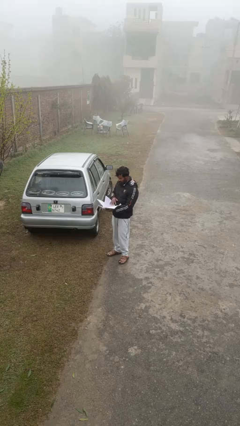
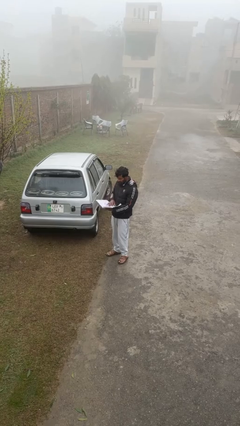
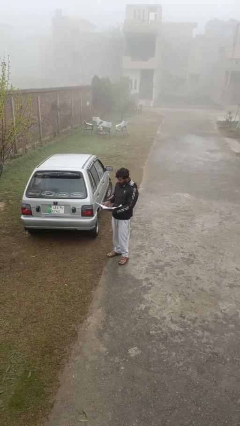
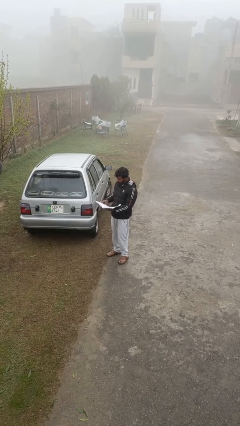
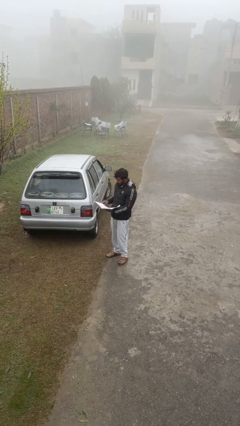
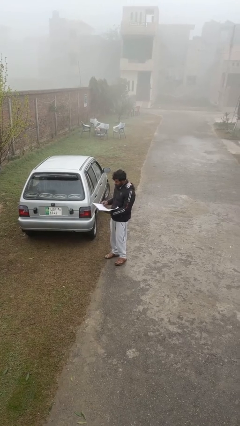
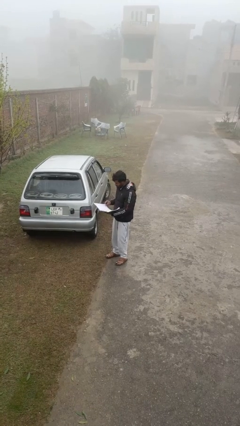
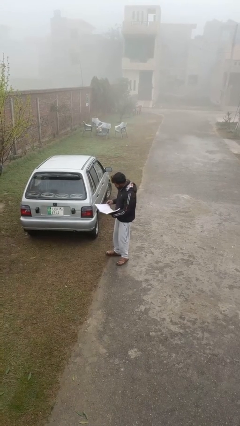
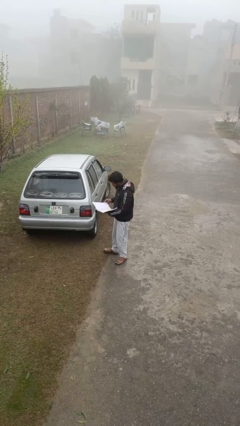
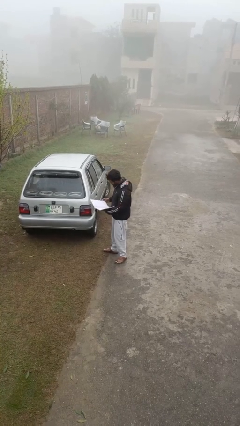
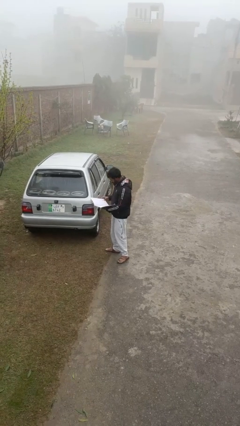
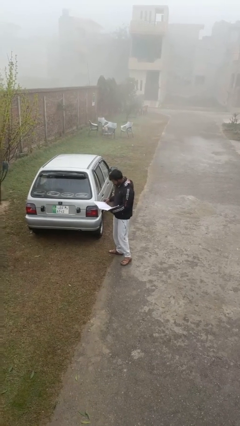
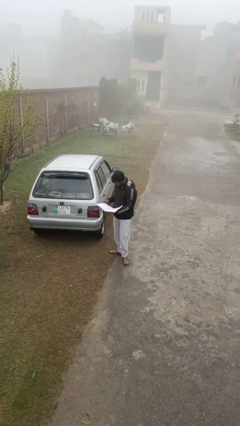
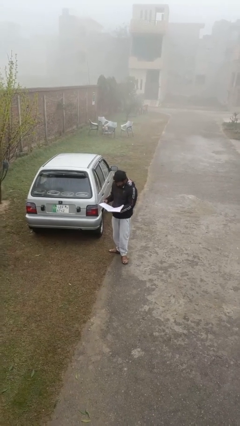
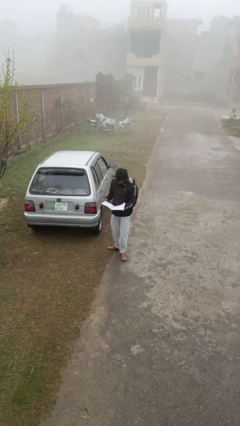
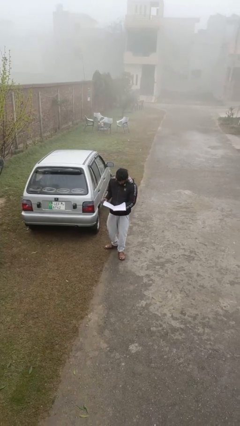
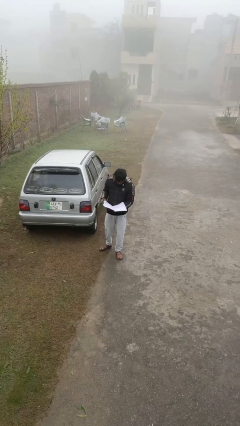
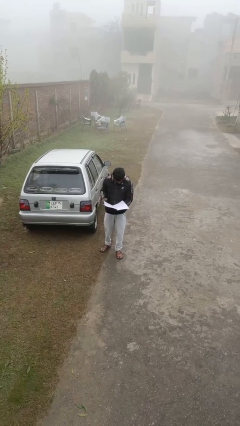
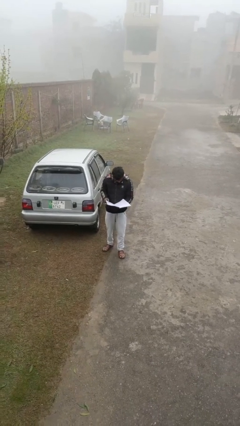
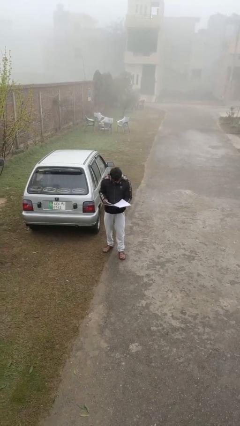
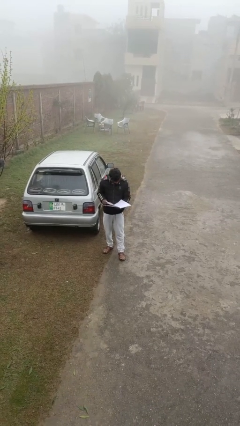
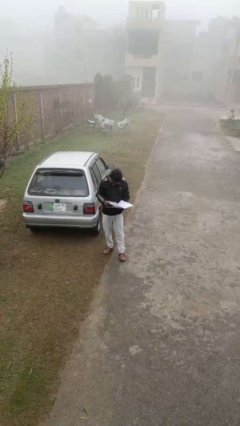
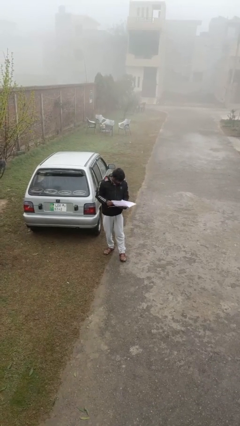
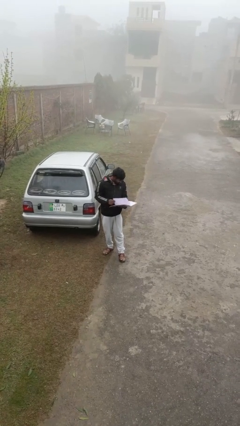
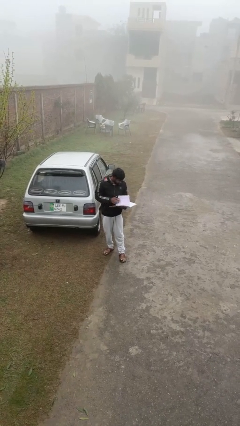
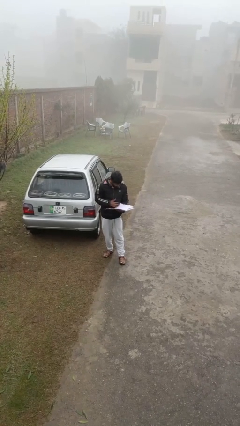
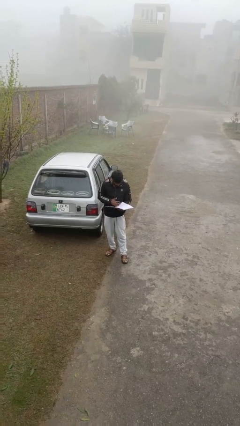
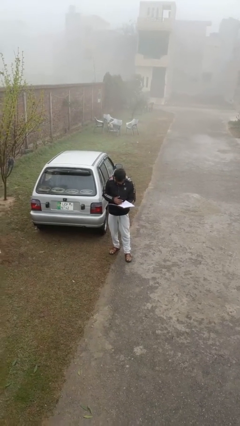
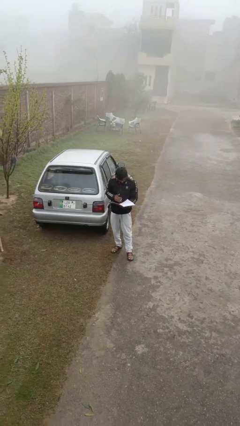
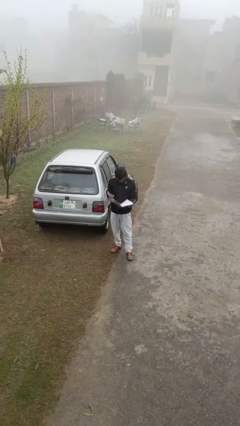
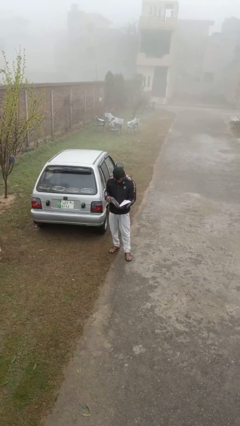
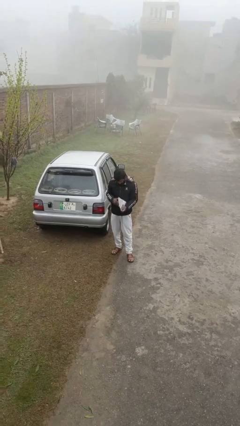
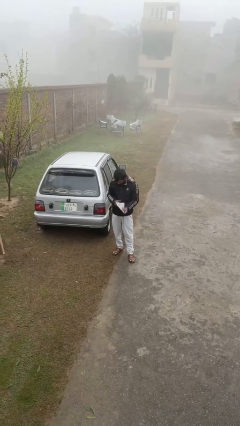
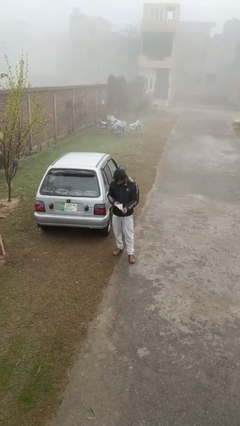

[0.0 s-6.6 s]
person reads document

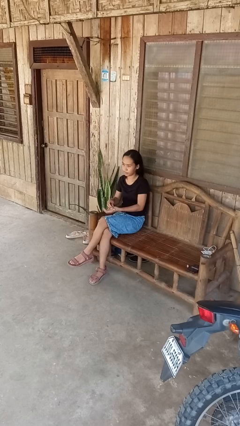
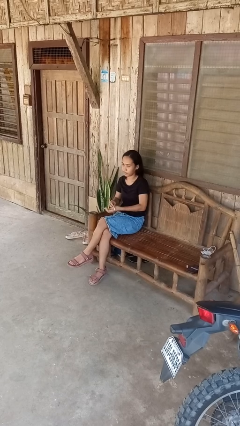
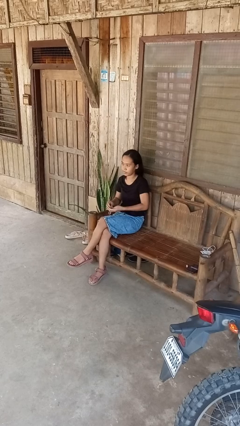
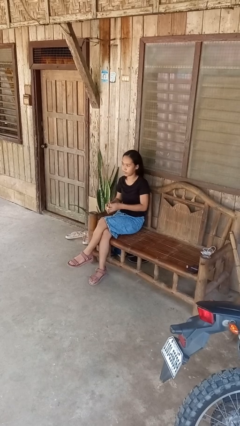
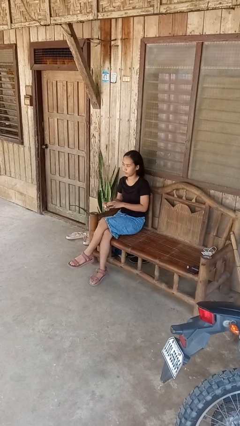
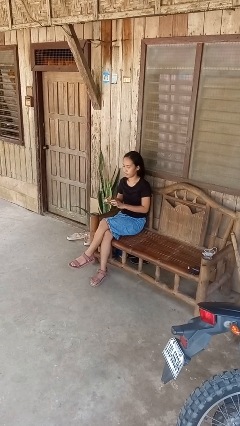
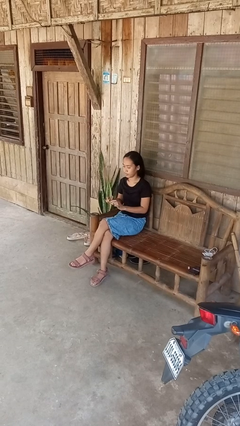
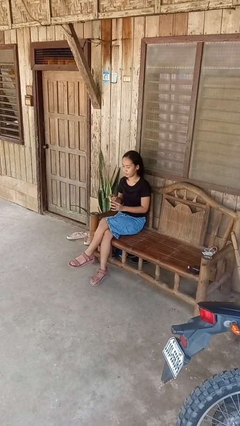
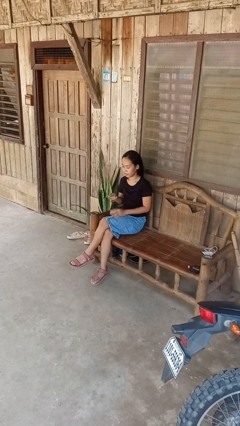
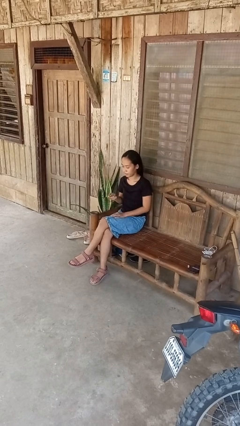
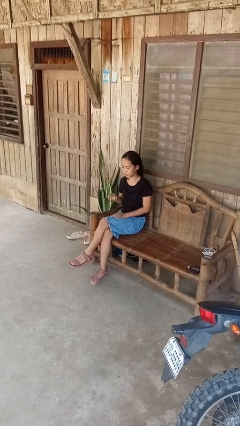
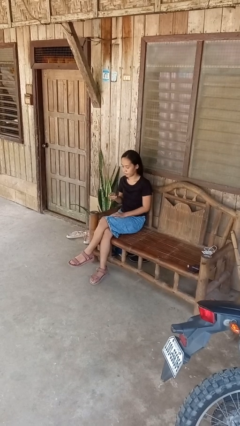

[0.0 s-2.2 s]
person takes off wristwatch

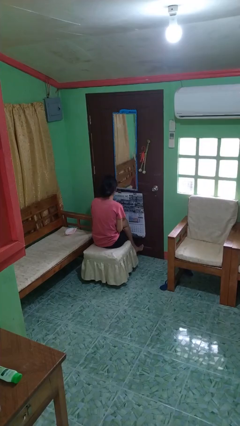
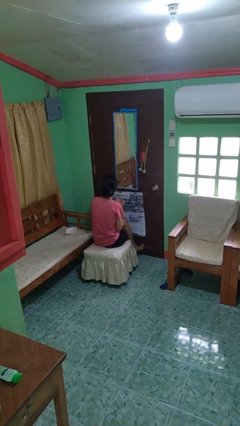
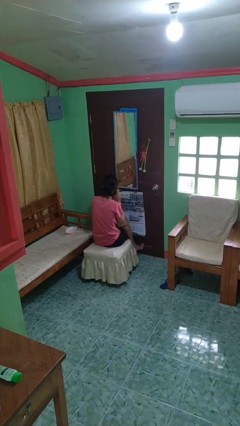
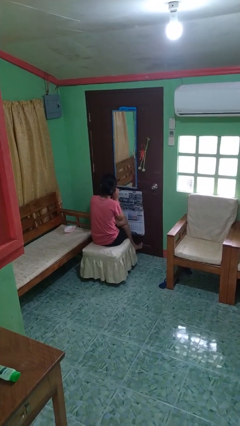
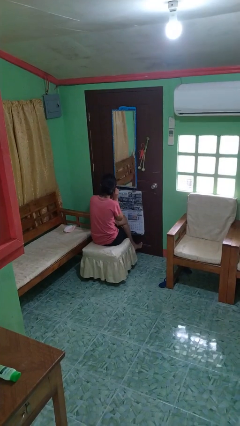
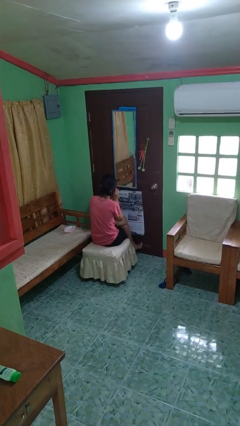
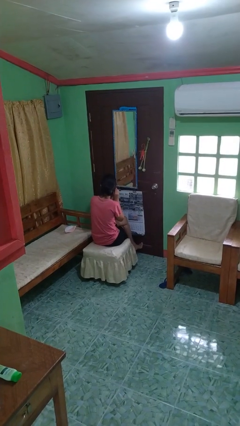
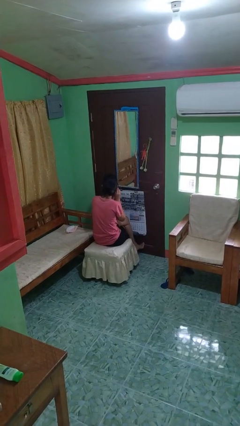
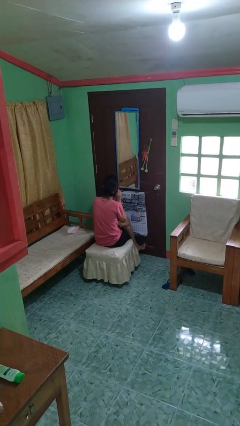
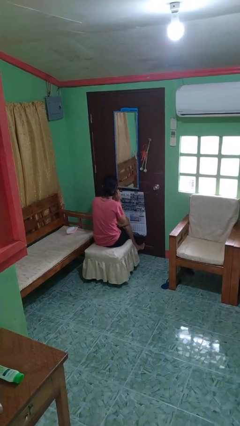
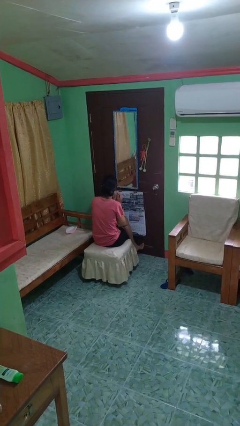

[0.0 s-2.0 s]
person takes off earrings

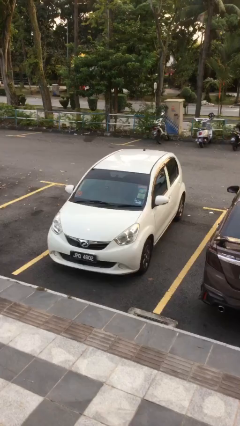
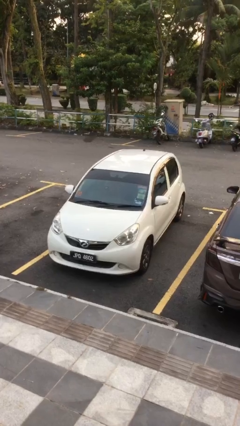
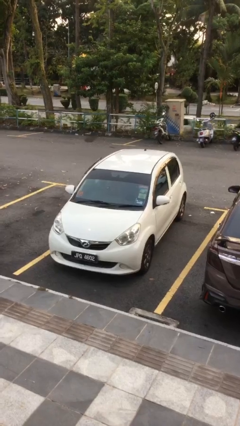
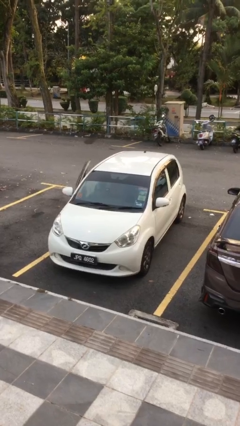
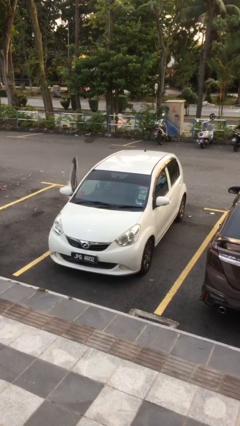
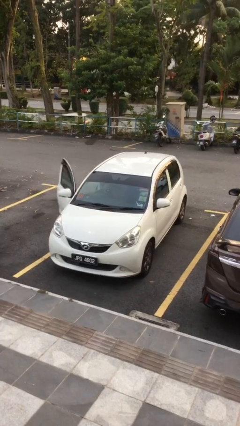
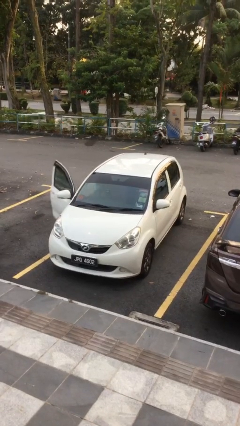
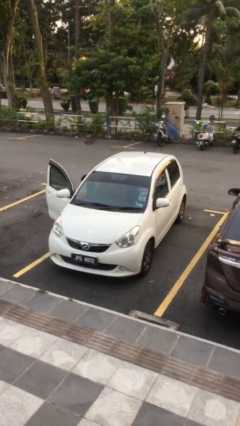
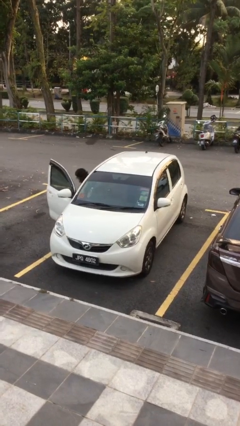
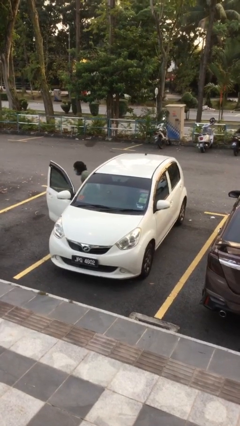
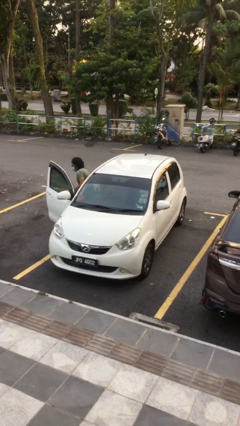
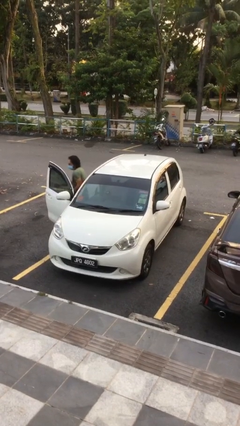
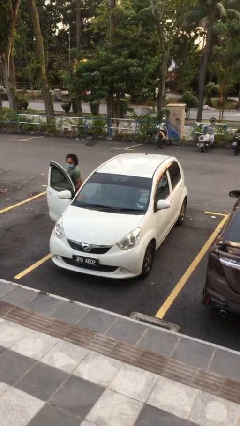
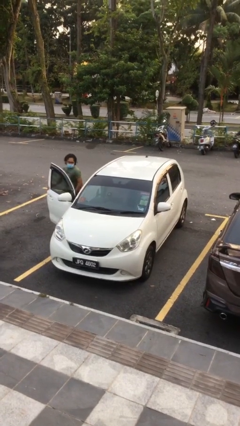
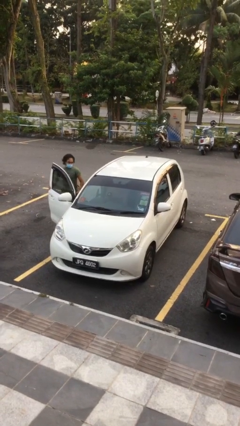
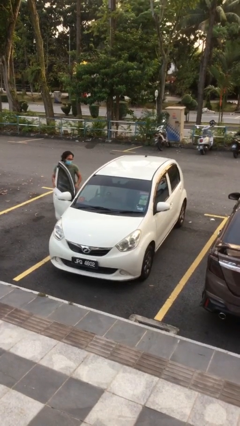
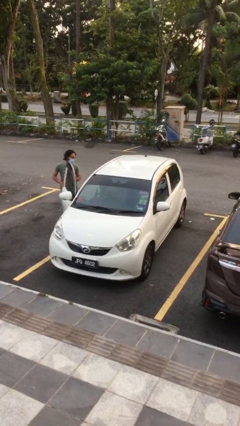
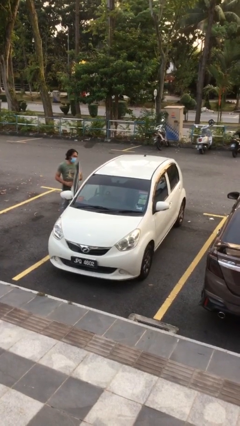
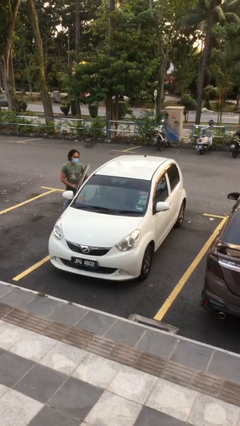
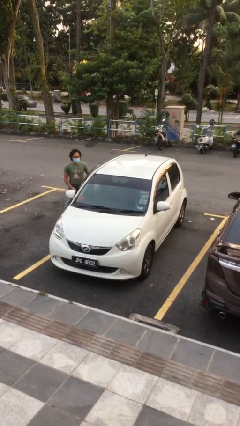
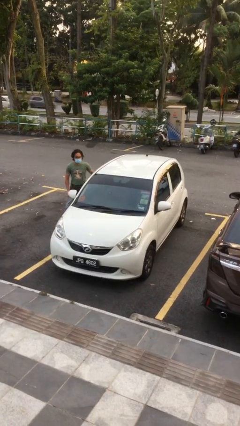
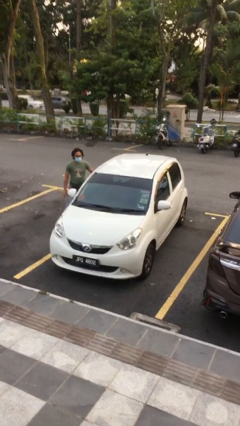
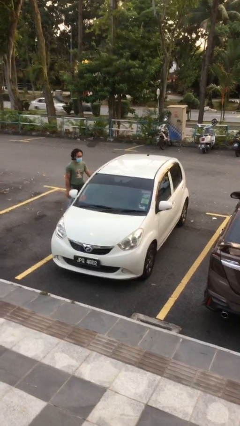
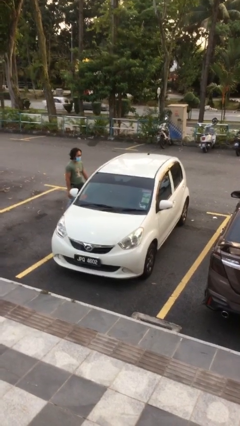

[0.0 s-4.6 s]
car drops off person

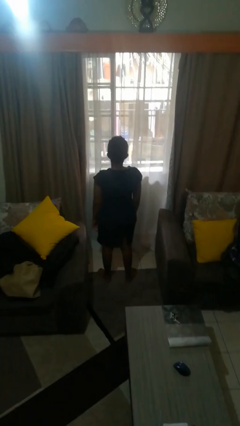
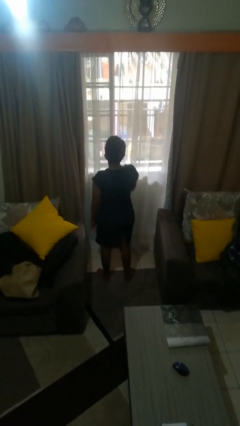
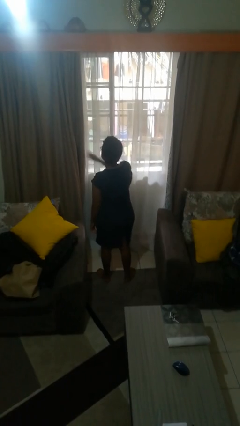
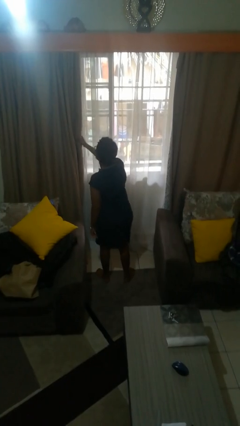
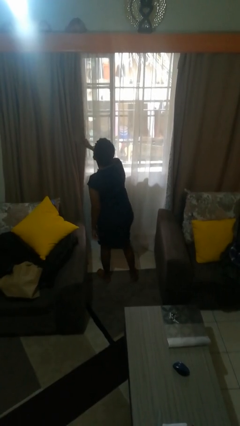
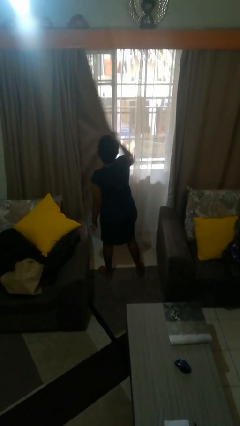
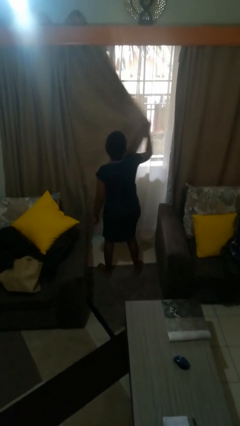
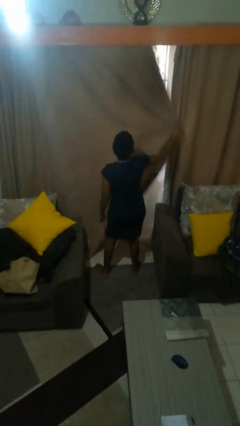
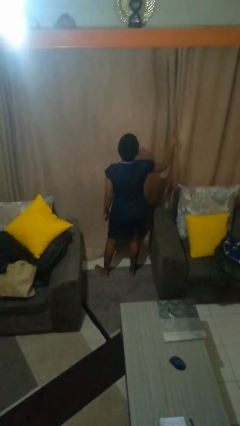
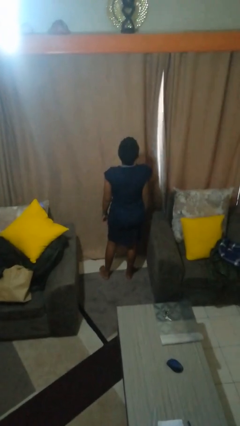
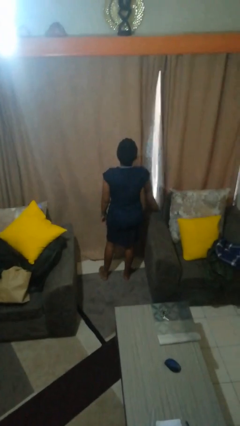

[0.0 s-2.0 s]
person closes curtains

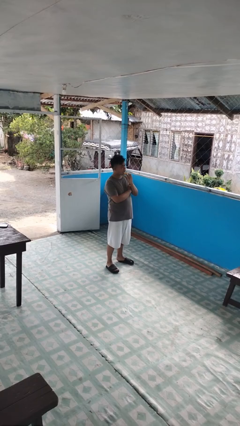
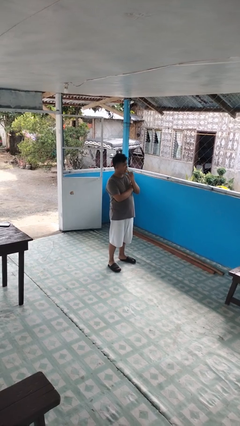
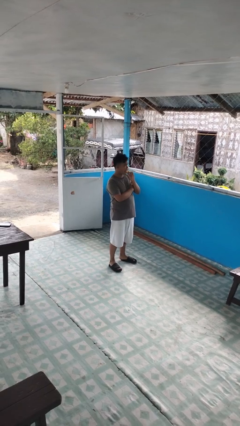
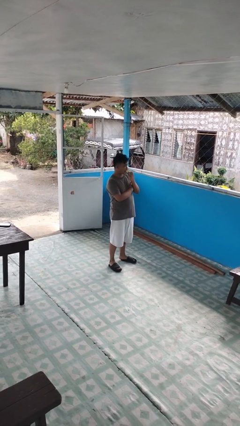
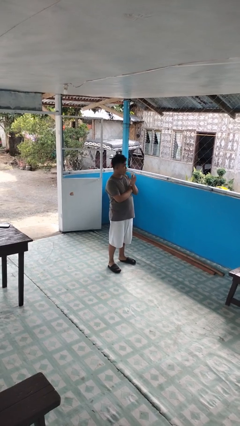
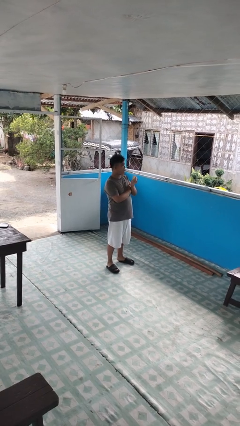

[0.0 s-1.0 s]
person eats banana
